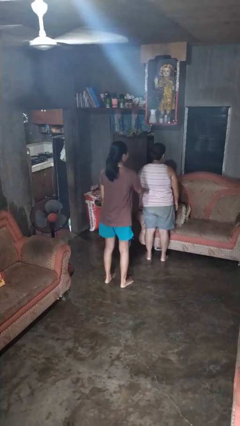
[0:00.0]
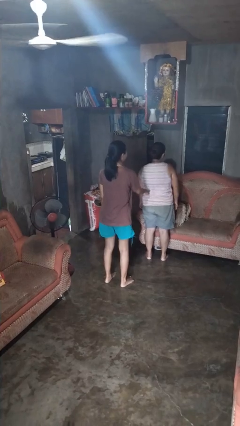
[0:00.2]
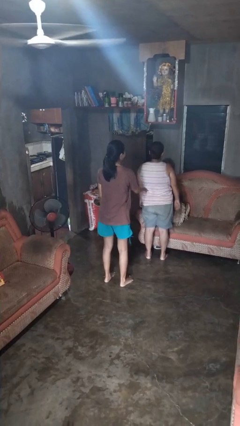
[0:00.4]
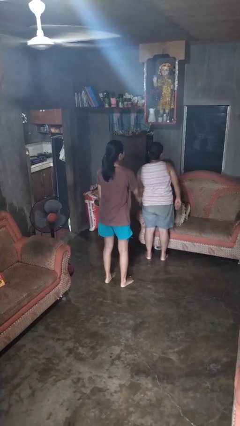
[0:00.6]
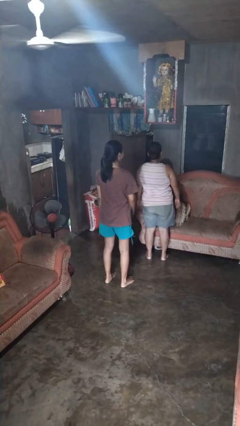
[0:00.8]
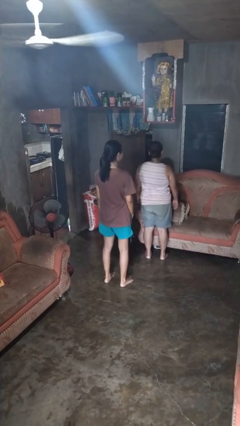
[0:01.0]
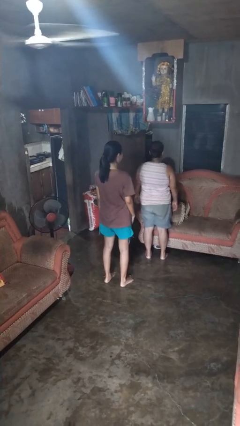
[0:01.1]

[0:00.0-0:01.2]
person tickles person

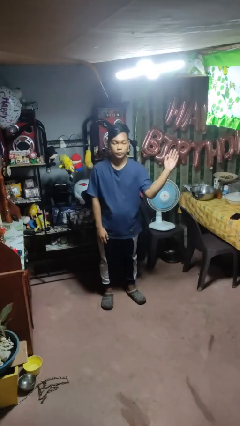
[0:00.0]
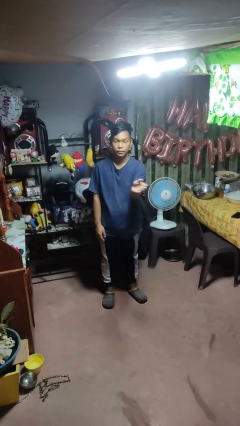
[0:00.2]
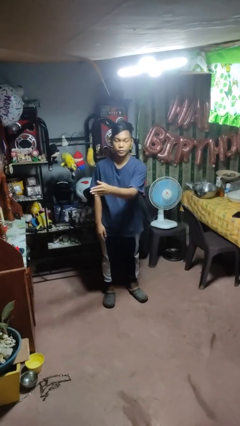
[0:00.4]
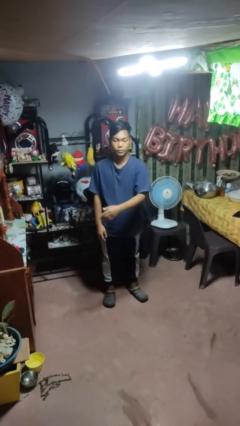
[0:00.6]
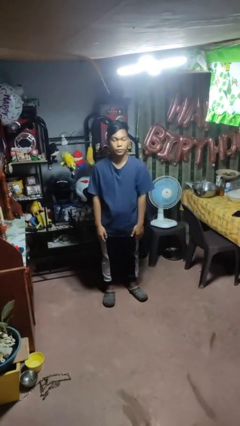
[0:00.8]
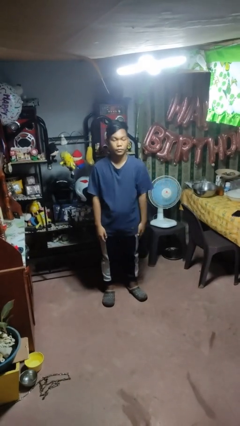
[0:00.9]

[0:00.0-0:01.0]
person gestures swipe right

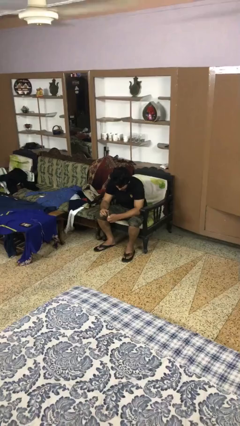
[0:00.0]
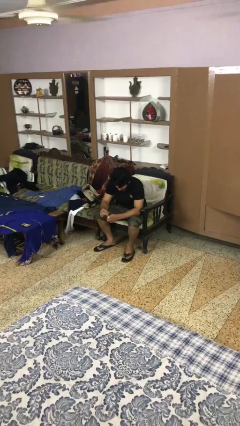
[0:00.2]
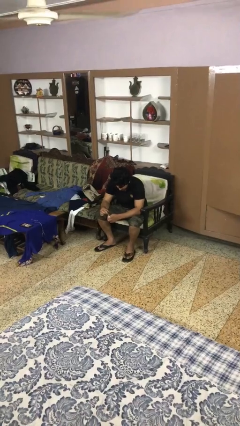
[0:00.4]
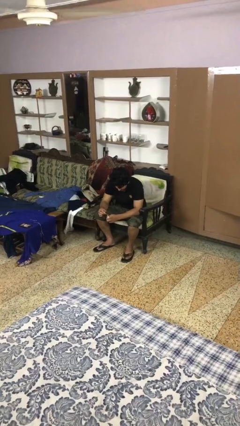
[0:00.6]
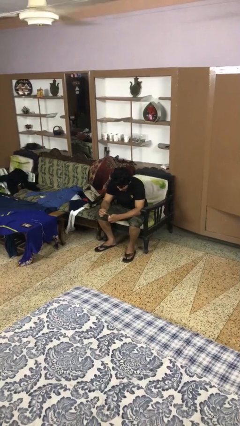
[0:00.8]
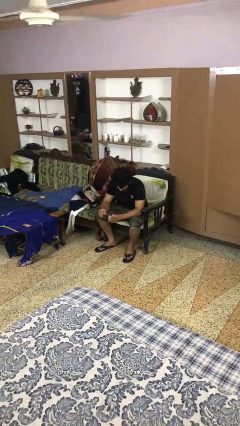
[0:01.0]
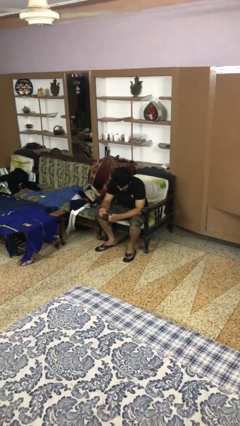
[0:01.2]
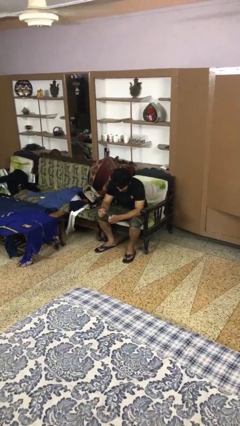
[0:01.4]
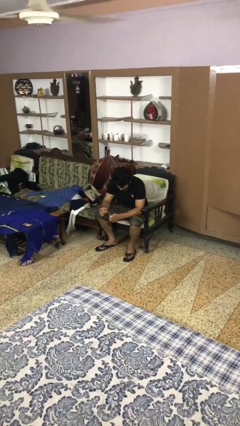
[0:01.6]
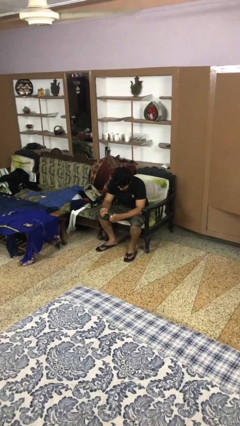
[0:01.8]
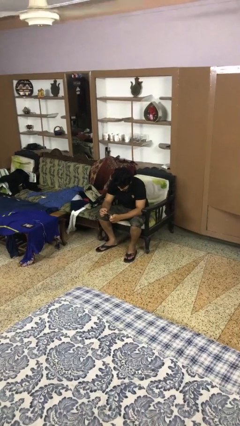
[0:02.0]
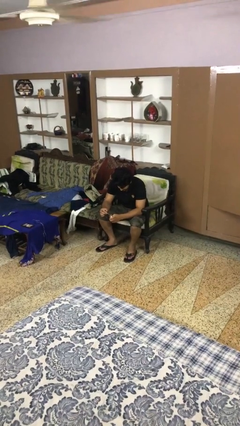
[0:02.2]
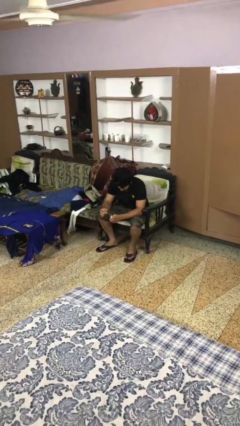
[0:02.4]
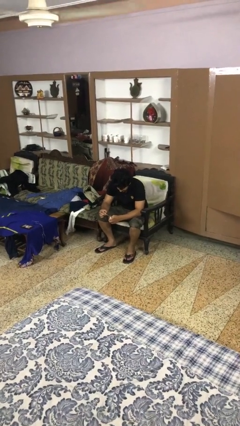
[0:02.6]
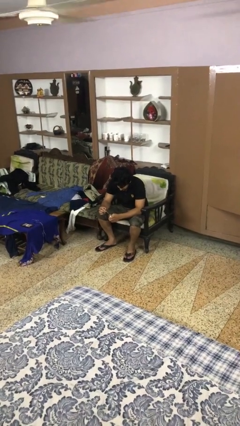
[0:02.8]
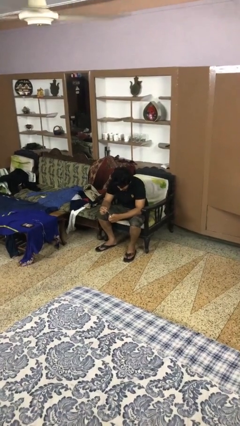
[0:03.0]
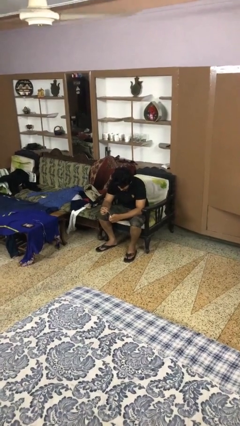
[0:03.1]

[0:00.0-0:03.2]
person paints fingernails

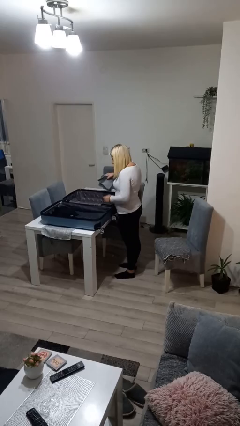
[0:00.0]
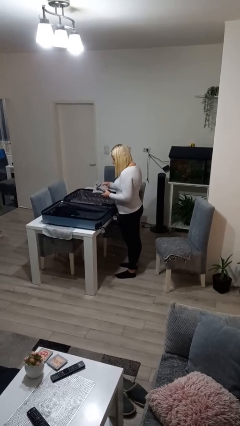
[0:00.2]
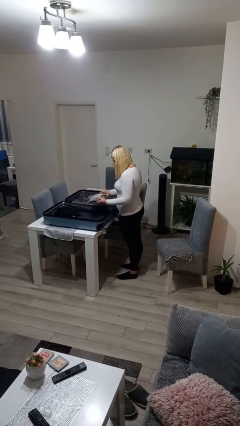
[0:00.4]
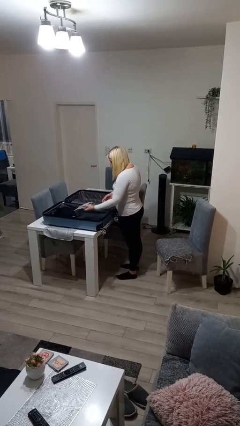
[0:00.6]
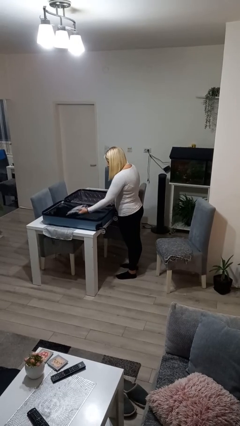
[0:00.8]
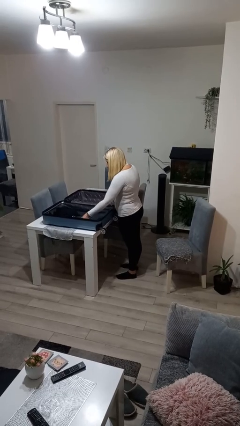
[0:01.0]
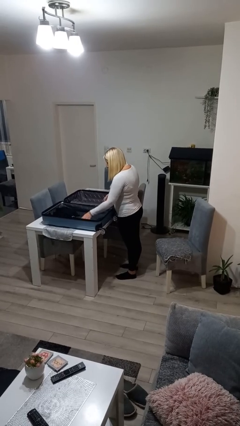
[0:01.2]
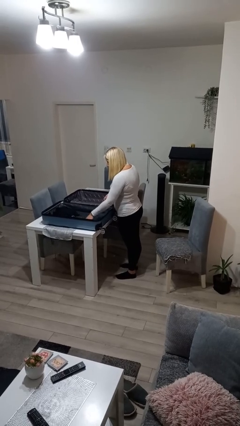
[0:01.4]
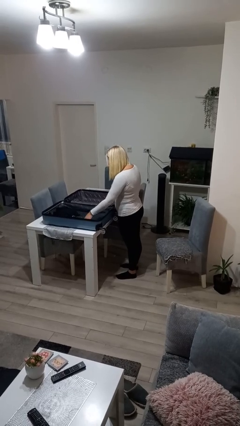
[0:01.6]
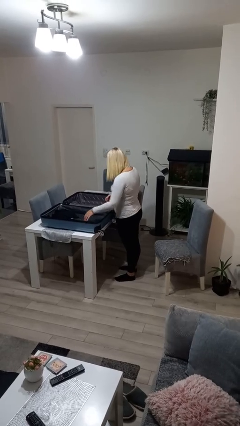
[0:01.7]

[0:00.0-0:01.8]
person loads clothes into suitcase

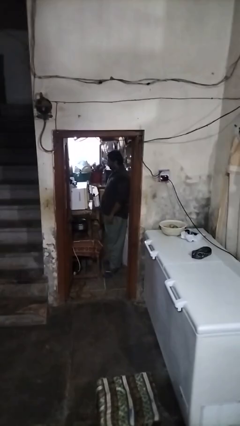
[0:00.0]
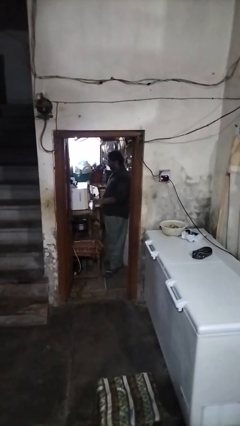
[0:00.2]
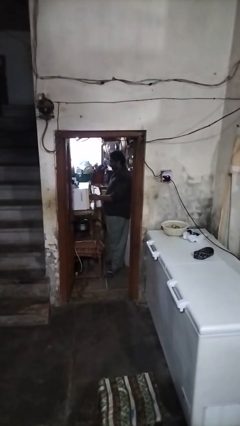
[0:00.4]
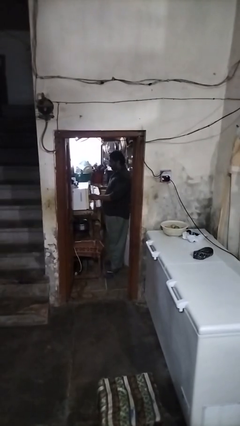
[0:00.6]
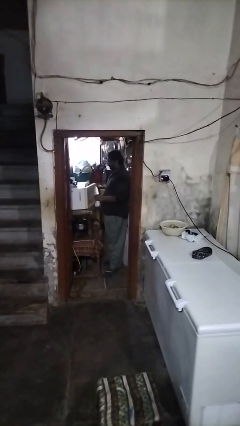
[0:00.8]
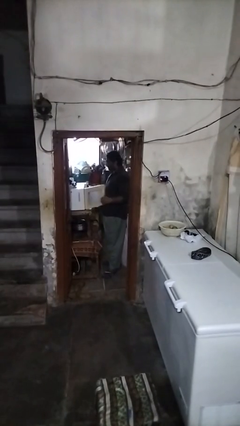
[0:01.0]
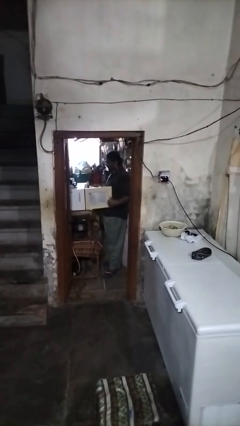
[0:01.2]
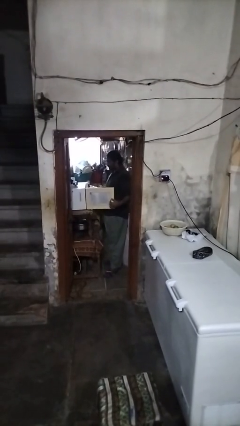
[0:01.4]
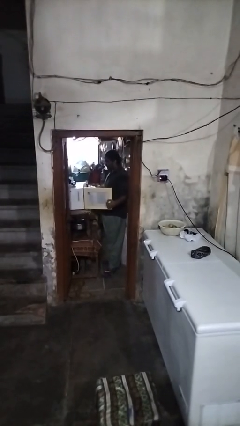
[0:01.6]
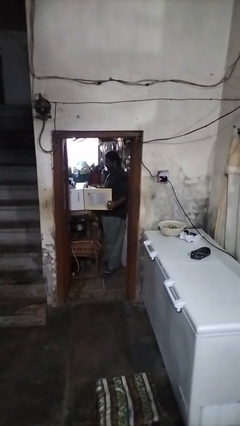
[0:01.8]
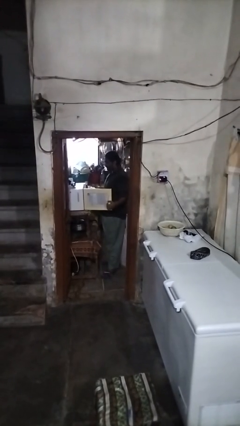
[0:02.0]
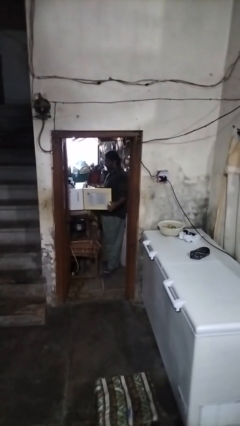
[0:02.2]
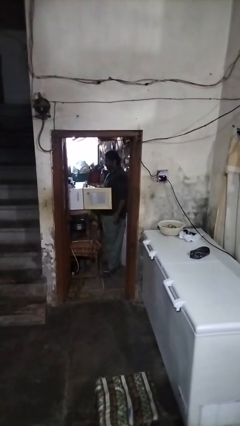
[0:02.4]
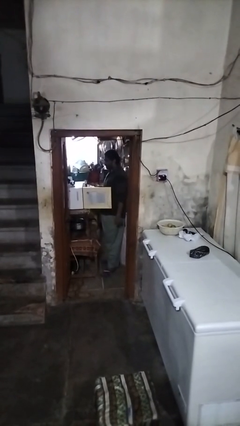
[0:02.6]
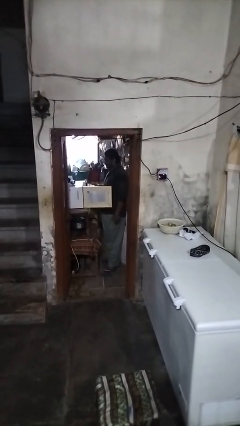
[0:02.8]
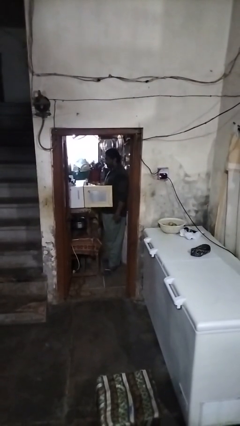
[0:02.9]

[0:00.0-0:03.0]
person opens oven door

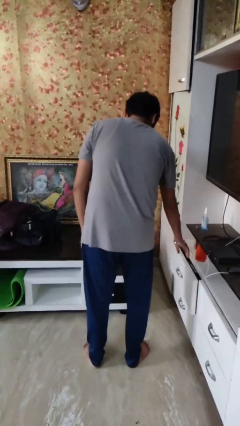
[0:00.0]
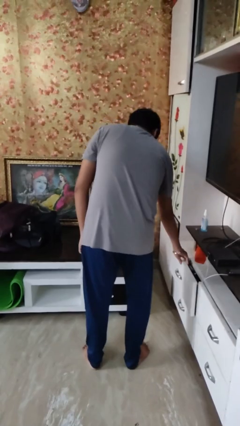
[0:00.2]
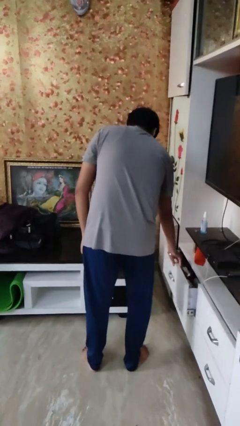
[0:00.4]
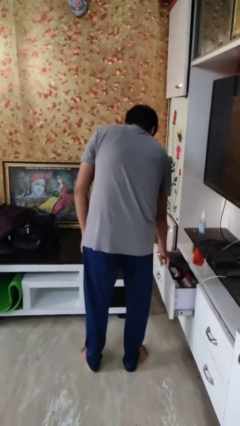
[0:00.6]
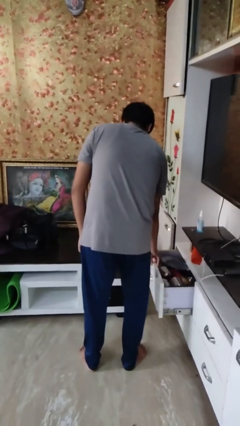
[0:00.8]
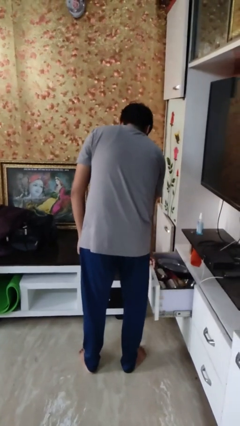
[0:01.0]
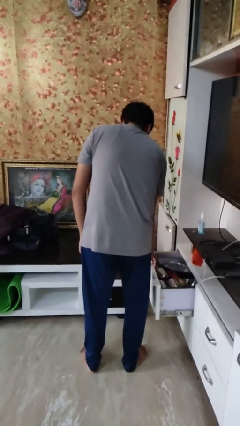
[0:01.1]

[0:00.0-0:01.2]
person opens kitchen drawer

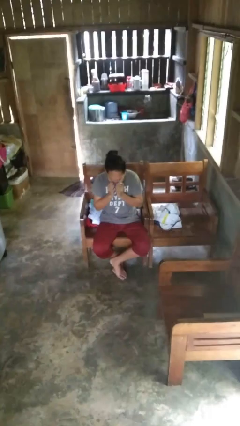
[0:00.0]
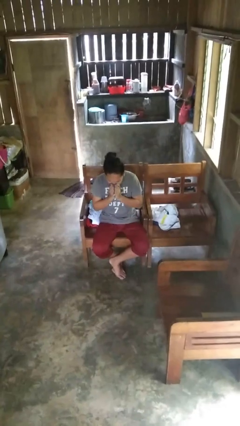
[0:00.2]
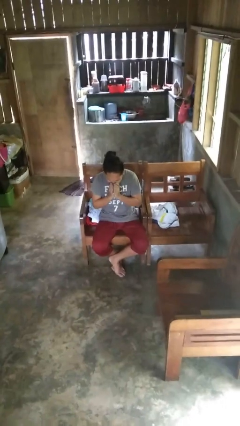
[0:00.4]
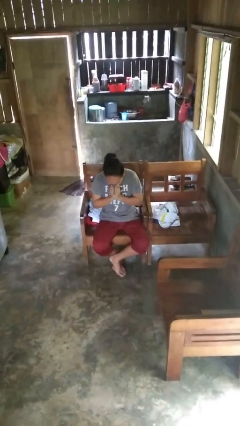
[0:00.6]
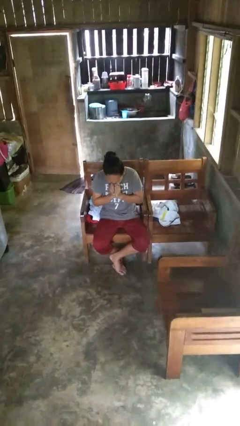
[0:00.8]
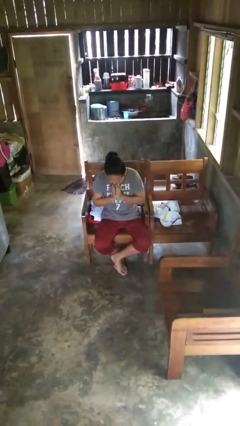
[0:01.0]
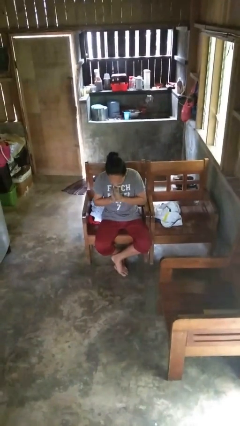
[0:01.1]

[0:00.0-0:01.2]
person blows nose

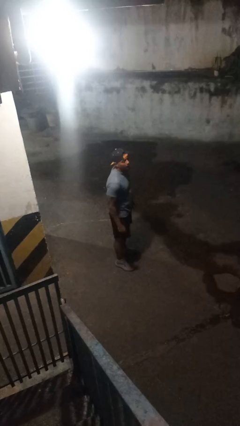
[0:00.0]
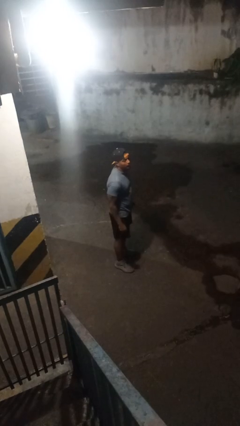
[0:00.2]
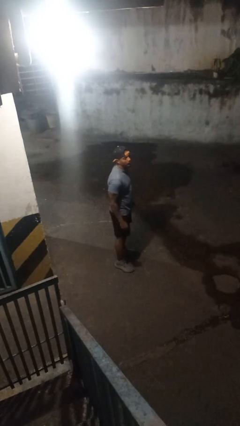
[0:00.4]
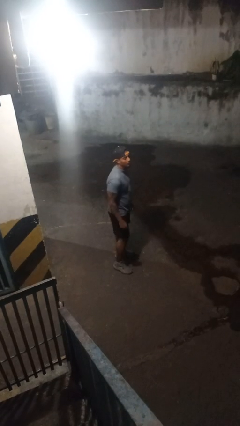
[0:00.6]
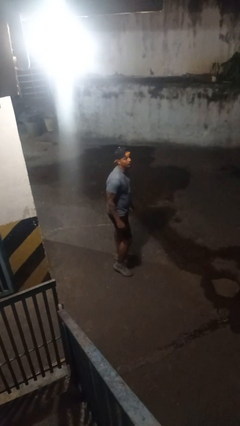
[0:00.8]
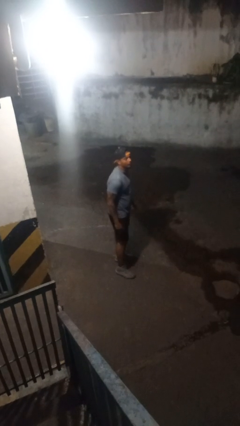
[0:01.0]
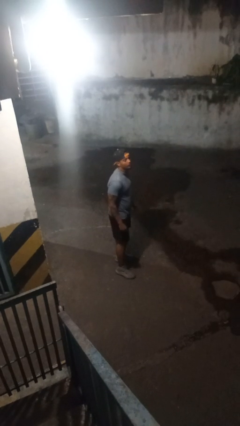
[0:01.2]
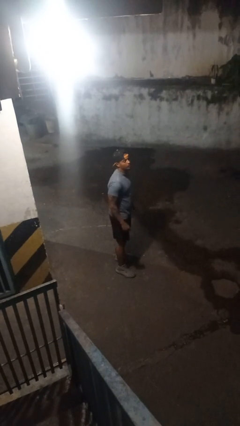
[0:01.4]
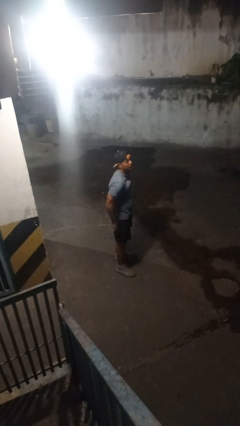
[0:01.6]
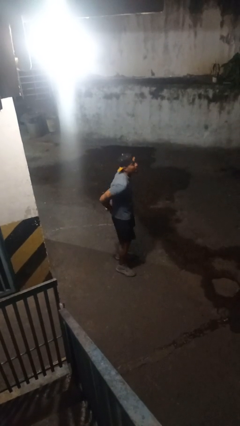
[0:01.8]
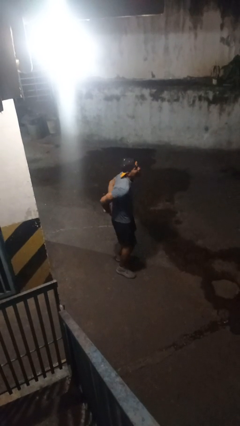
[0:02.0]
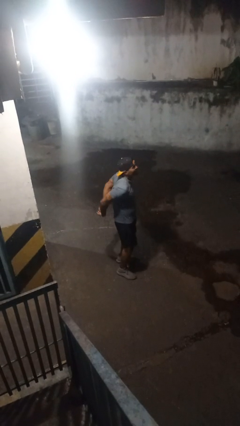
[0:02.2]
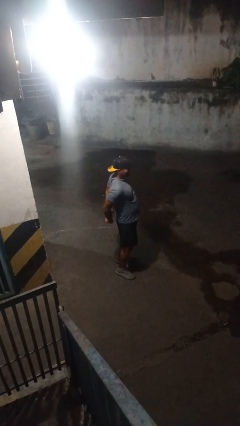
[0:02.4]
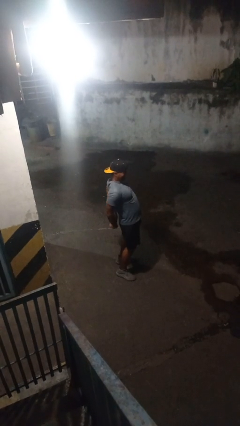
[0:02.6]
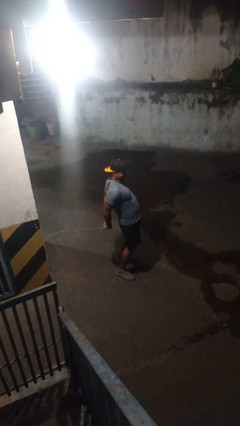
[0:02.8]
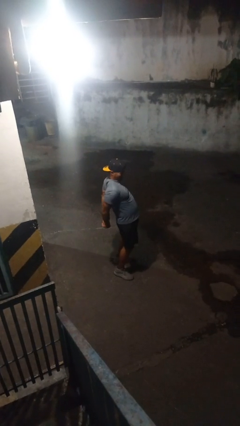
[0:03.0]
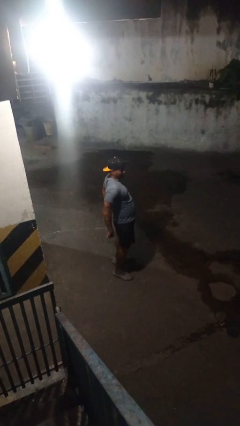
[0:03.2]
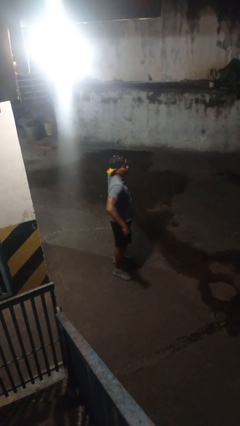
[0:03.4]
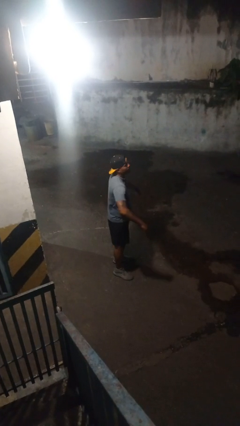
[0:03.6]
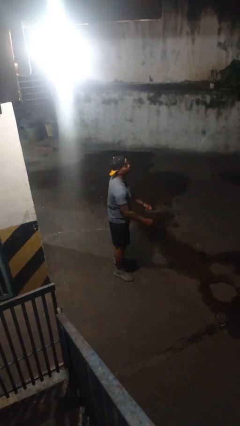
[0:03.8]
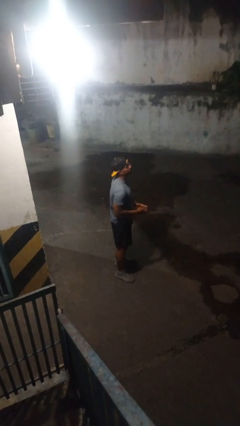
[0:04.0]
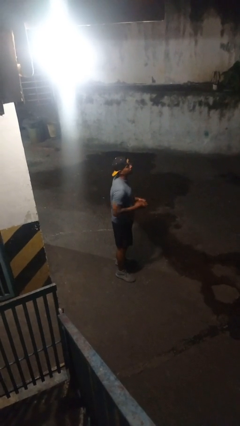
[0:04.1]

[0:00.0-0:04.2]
person stretches back
